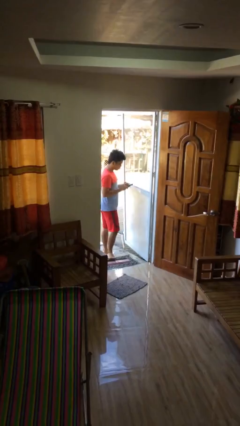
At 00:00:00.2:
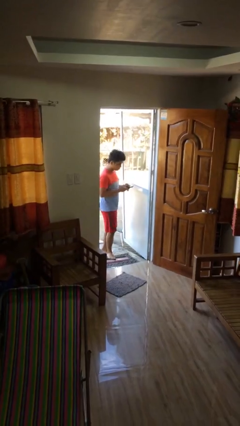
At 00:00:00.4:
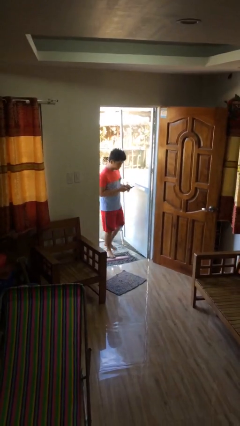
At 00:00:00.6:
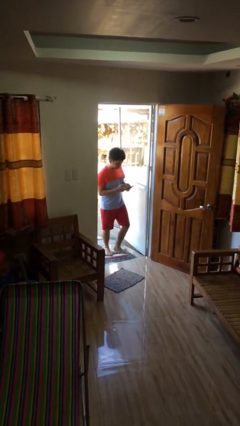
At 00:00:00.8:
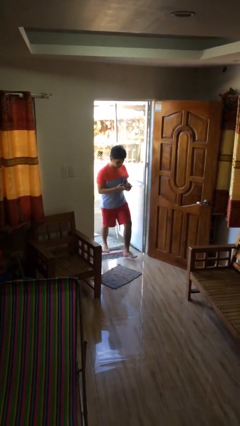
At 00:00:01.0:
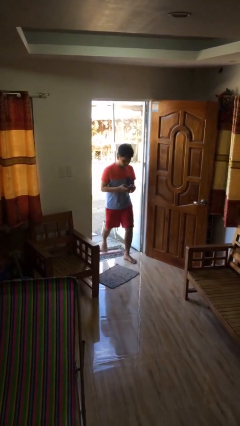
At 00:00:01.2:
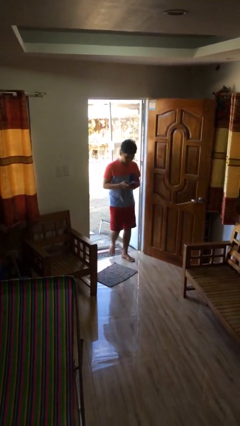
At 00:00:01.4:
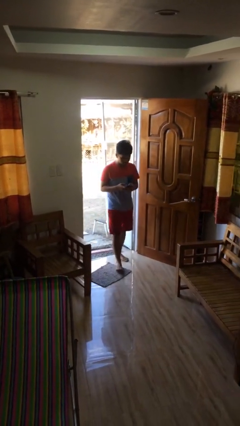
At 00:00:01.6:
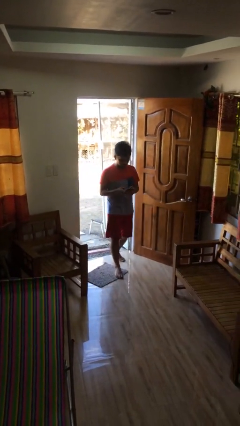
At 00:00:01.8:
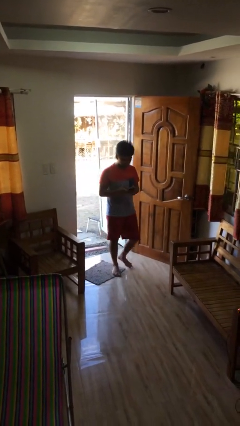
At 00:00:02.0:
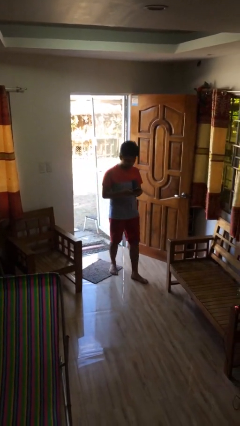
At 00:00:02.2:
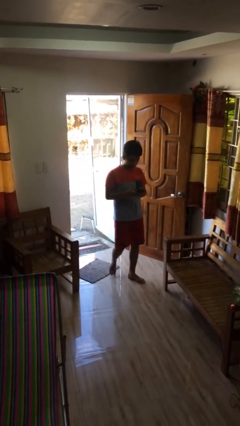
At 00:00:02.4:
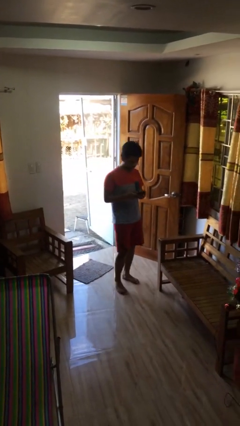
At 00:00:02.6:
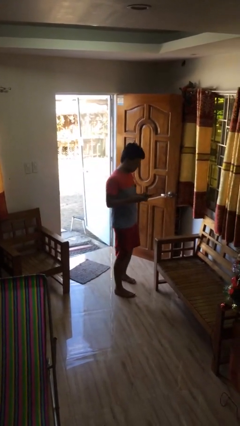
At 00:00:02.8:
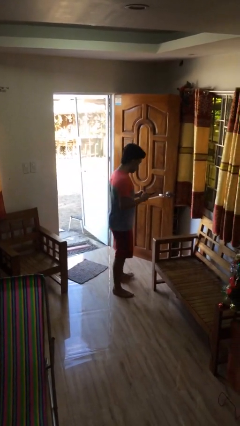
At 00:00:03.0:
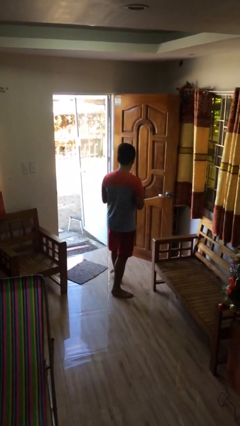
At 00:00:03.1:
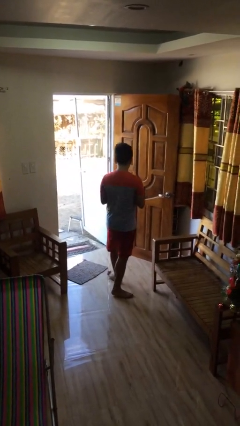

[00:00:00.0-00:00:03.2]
person enters scene through structure

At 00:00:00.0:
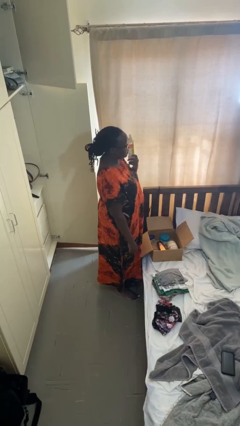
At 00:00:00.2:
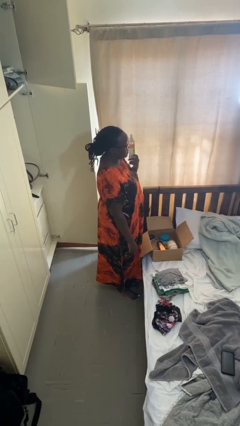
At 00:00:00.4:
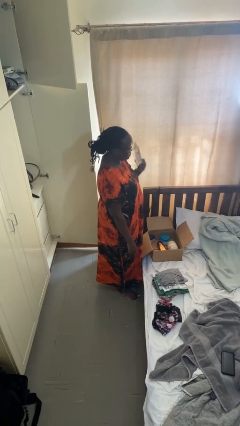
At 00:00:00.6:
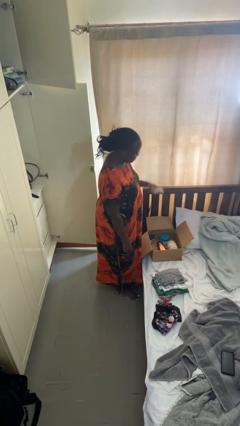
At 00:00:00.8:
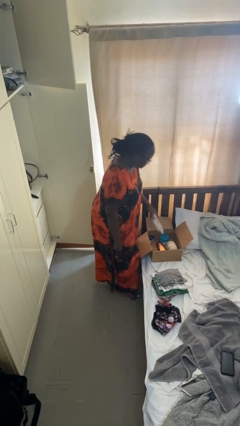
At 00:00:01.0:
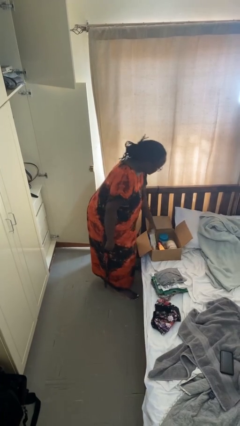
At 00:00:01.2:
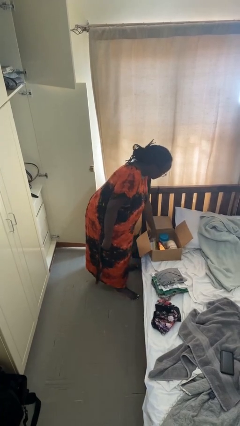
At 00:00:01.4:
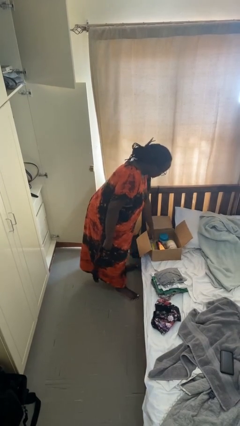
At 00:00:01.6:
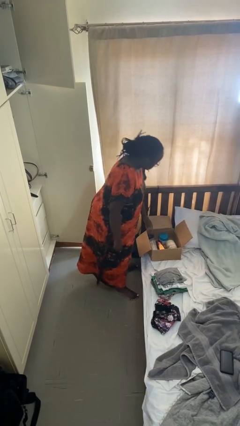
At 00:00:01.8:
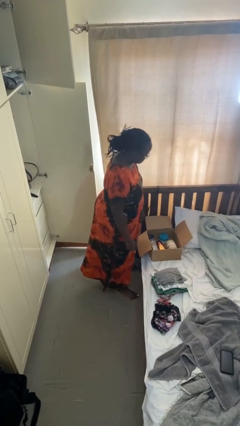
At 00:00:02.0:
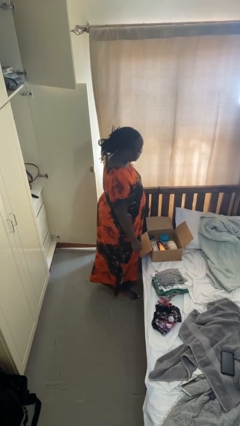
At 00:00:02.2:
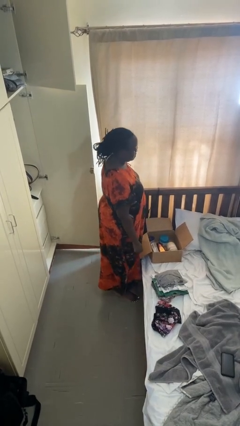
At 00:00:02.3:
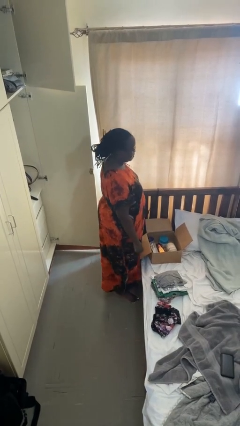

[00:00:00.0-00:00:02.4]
person puts object into box

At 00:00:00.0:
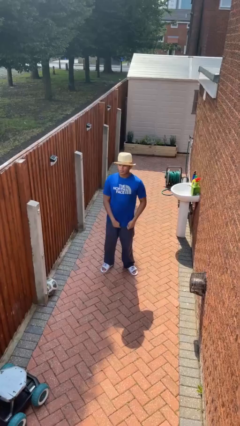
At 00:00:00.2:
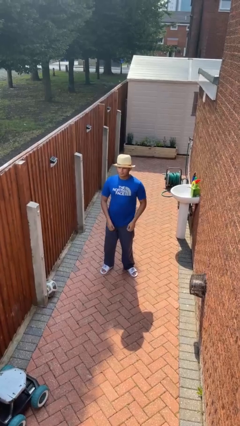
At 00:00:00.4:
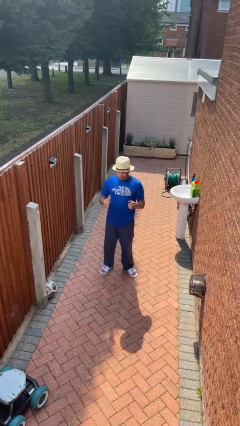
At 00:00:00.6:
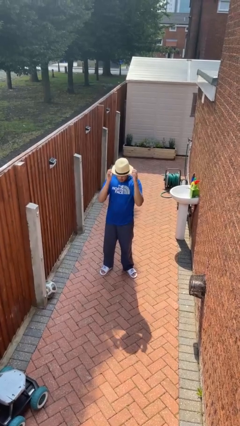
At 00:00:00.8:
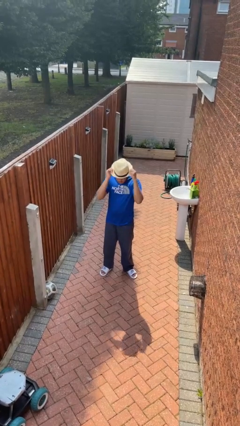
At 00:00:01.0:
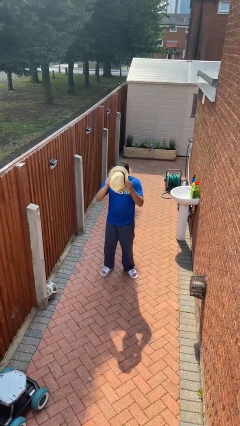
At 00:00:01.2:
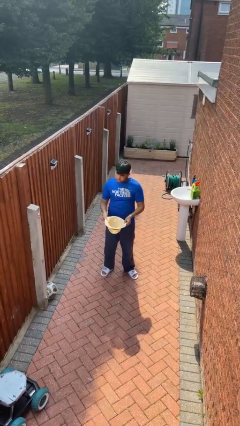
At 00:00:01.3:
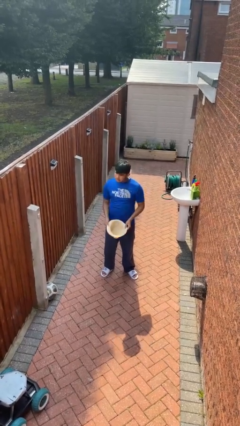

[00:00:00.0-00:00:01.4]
person takes off hat

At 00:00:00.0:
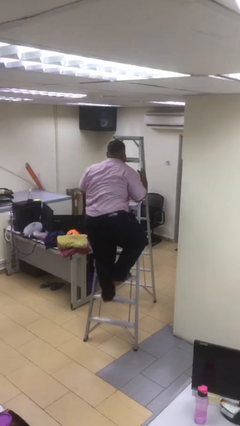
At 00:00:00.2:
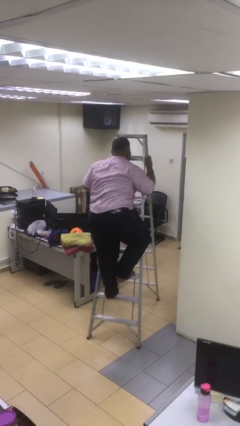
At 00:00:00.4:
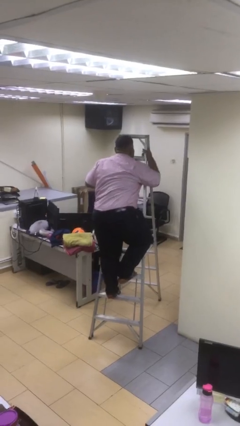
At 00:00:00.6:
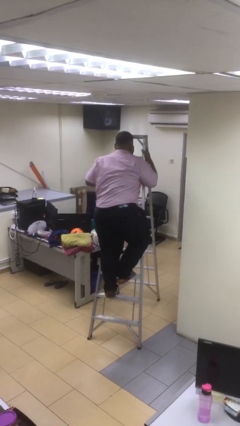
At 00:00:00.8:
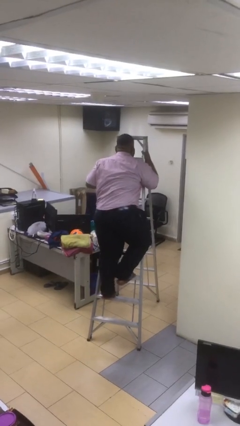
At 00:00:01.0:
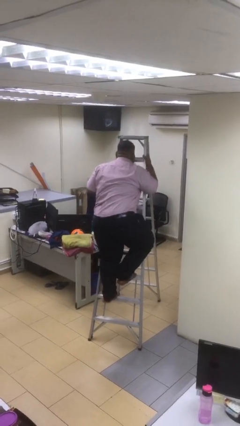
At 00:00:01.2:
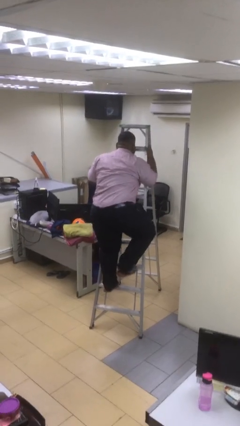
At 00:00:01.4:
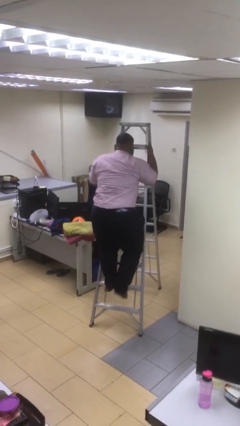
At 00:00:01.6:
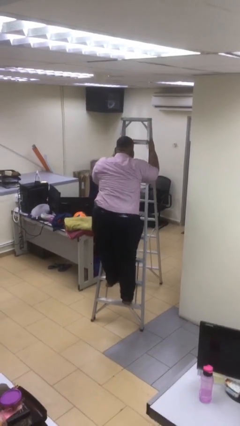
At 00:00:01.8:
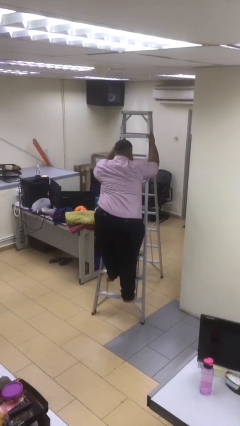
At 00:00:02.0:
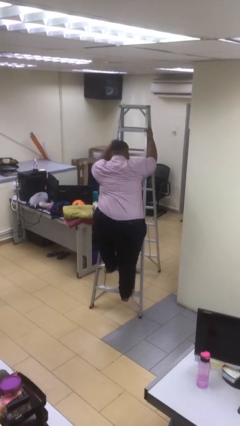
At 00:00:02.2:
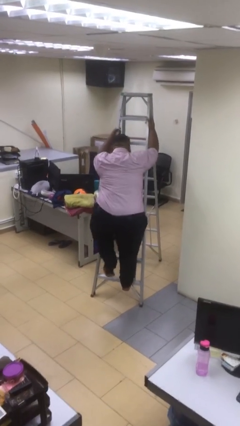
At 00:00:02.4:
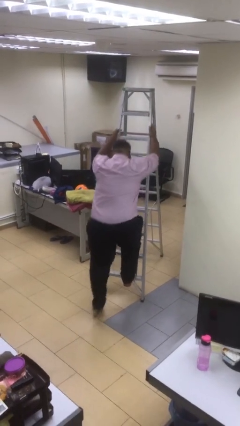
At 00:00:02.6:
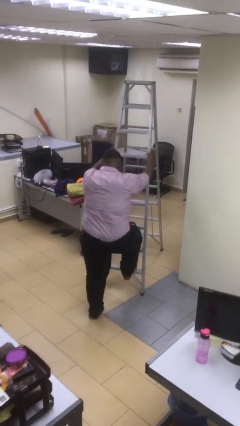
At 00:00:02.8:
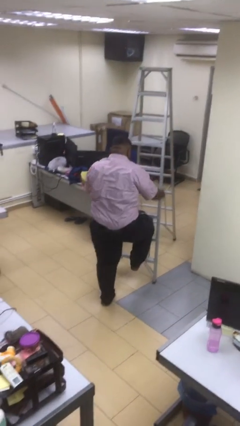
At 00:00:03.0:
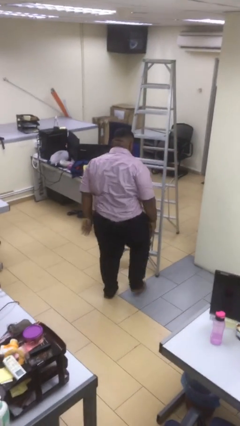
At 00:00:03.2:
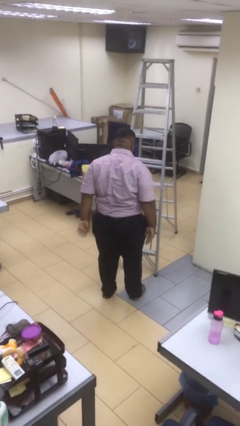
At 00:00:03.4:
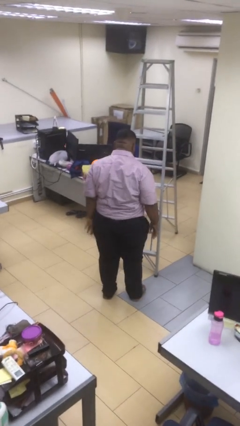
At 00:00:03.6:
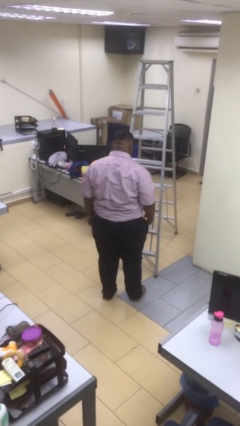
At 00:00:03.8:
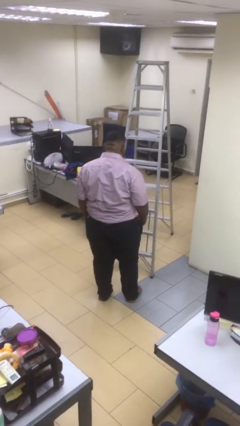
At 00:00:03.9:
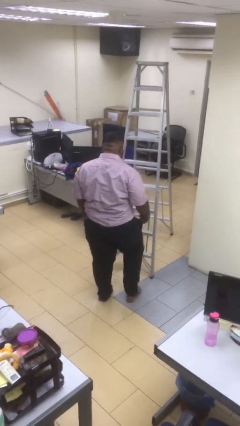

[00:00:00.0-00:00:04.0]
person climbs down ladder

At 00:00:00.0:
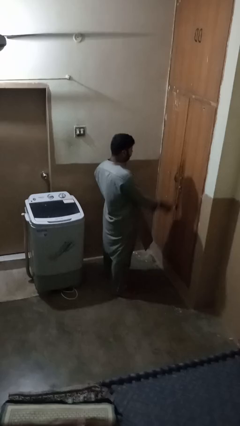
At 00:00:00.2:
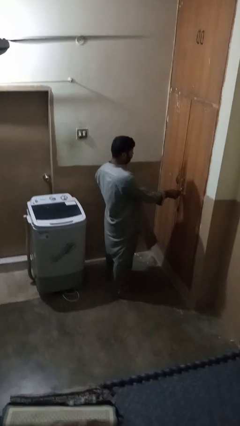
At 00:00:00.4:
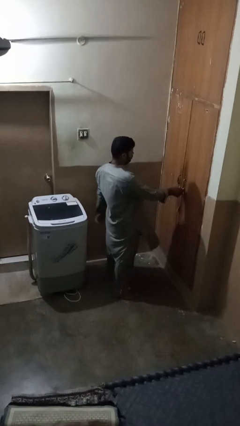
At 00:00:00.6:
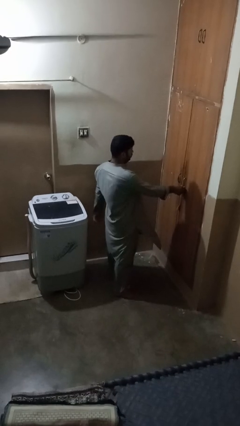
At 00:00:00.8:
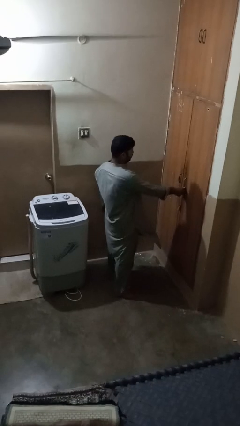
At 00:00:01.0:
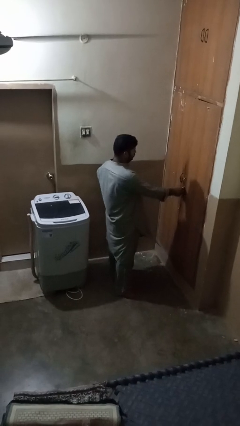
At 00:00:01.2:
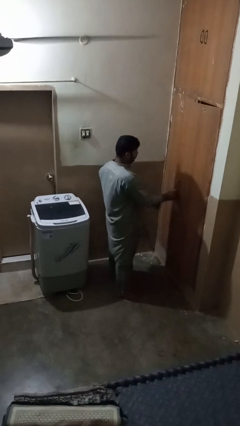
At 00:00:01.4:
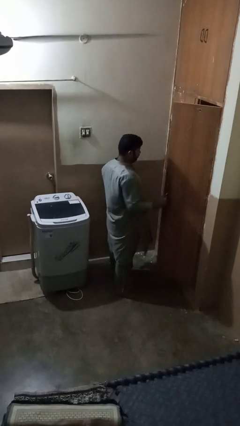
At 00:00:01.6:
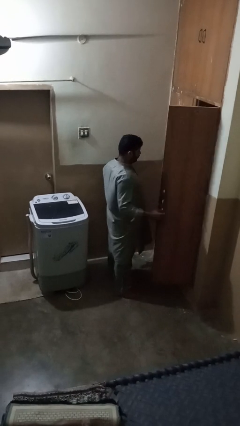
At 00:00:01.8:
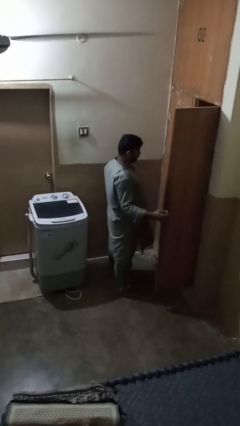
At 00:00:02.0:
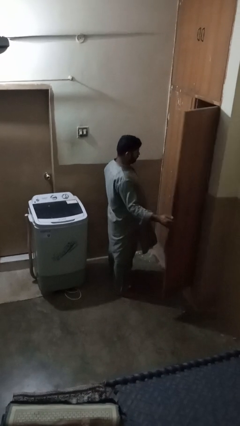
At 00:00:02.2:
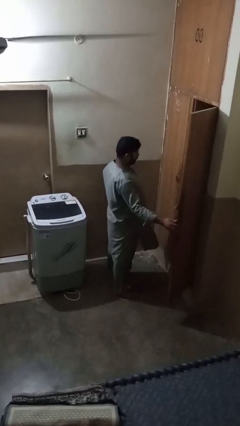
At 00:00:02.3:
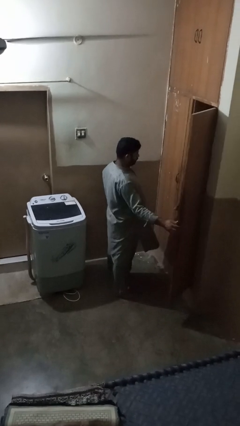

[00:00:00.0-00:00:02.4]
person opens closet door

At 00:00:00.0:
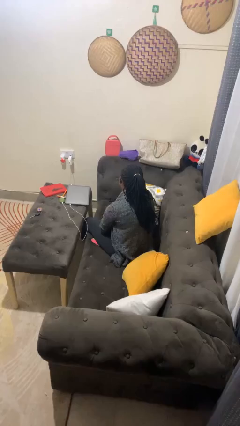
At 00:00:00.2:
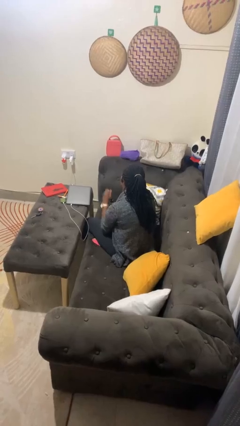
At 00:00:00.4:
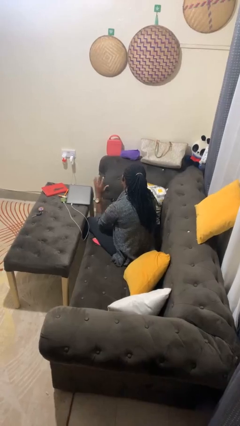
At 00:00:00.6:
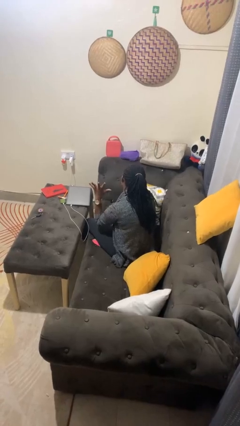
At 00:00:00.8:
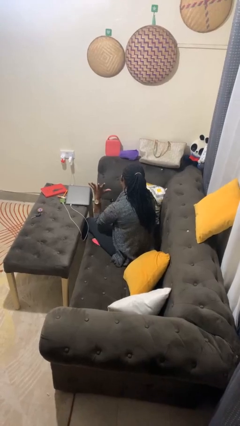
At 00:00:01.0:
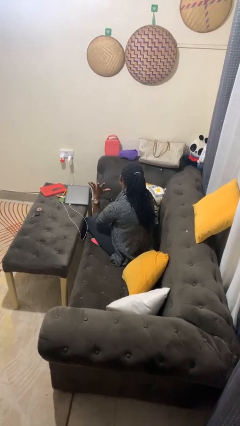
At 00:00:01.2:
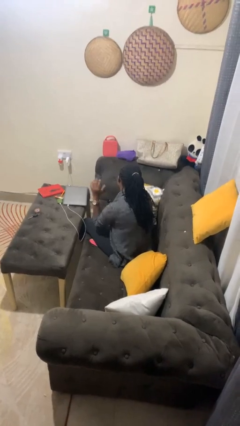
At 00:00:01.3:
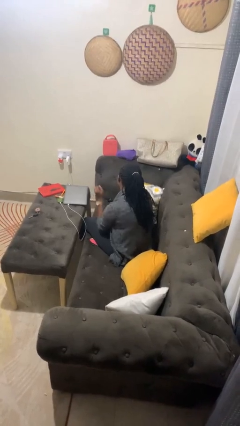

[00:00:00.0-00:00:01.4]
person gestures number five

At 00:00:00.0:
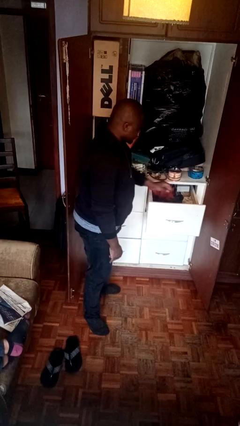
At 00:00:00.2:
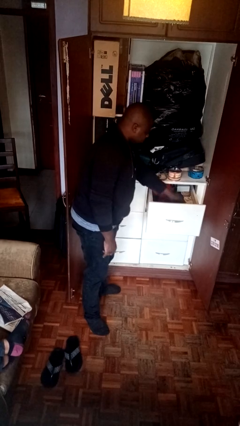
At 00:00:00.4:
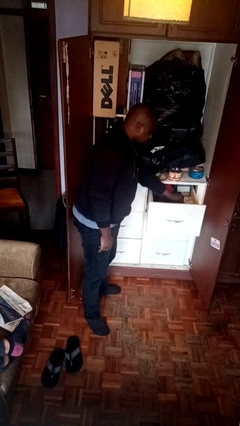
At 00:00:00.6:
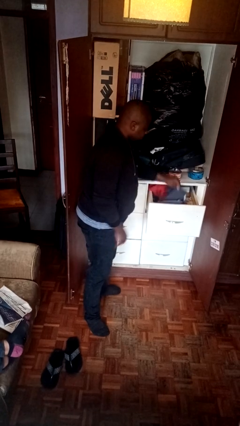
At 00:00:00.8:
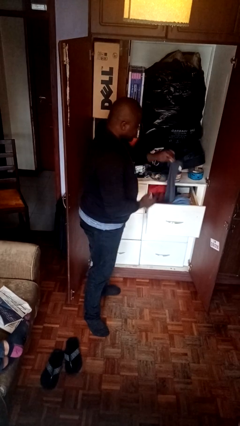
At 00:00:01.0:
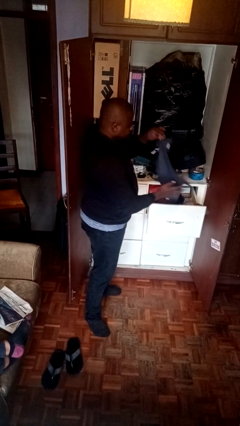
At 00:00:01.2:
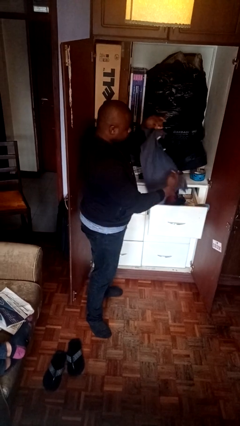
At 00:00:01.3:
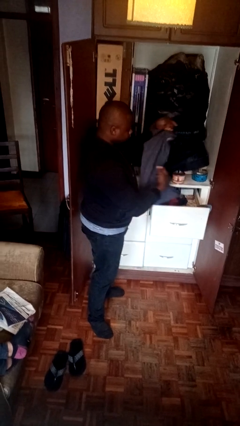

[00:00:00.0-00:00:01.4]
person takes clothes from dresser
